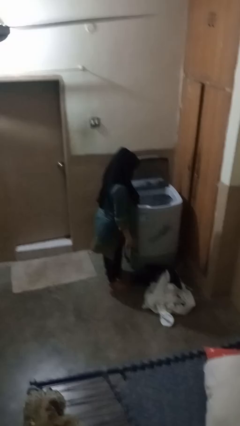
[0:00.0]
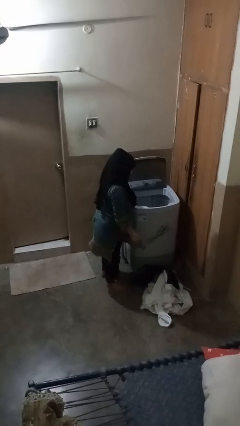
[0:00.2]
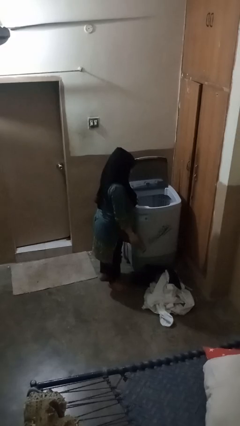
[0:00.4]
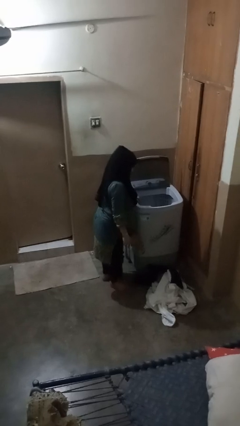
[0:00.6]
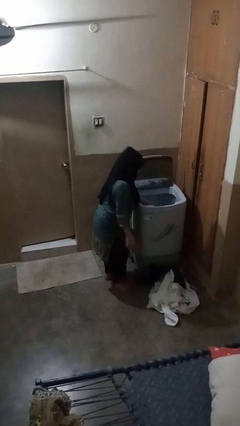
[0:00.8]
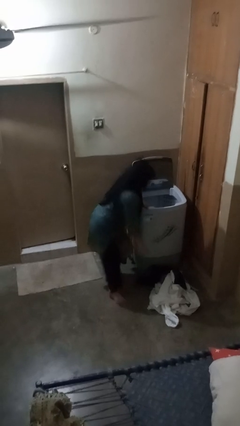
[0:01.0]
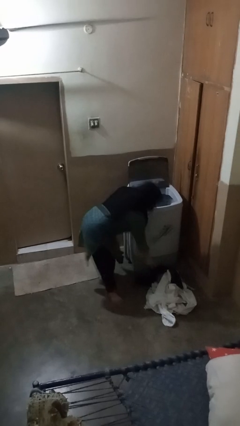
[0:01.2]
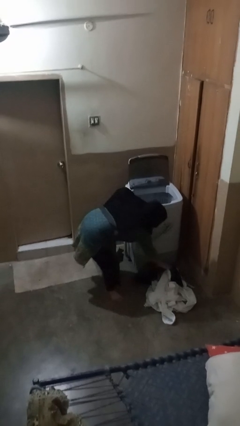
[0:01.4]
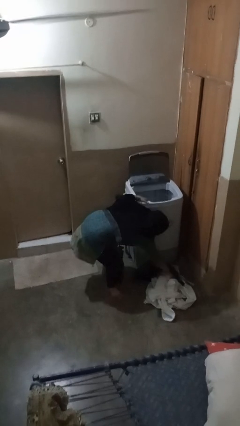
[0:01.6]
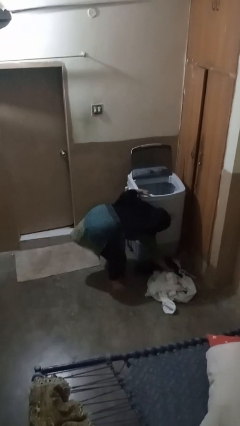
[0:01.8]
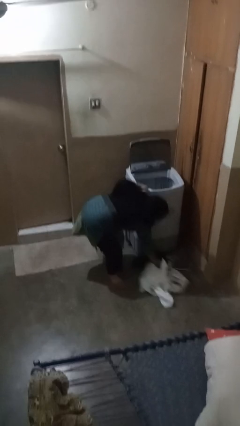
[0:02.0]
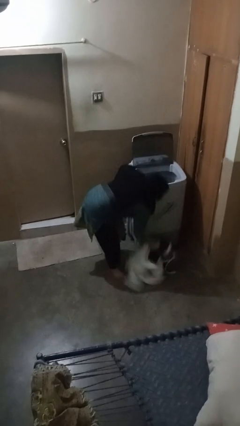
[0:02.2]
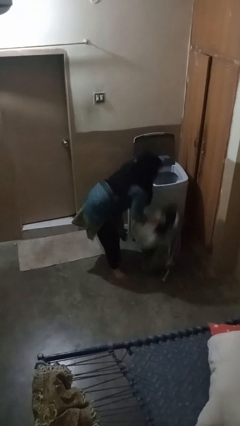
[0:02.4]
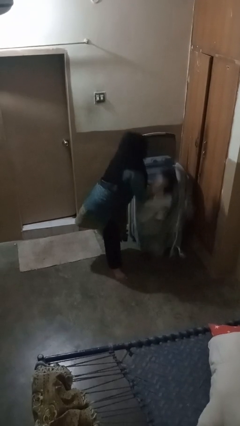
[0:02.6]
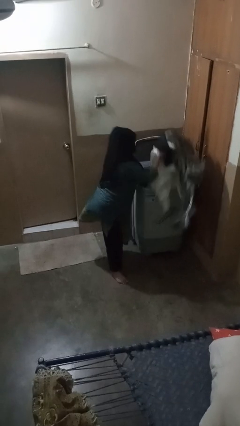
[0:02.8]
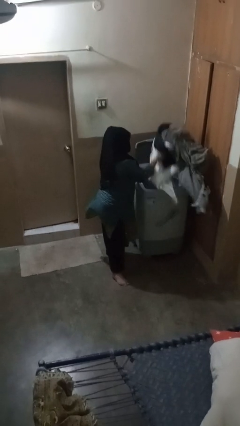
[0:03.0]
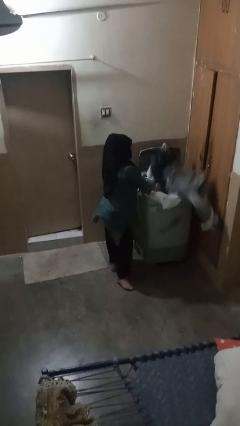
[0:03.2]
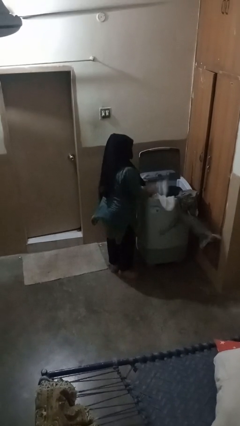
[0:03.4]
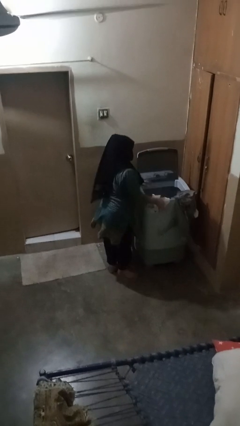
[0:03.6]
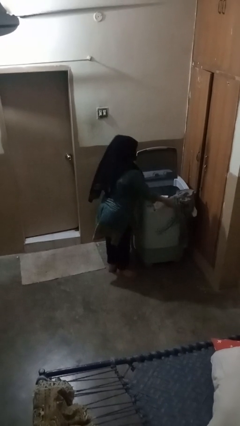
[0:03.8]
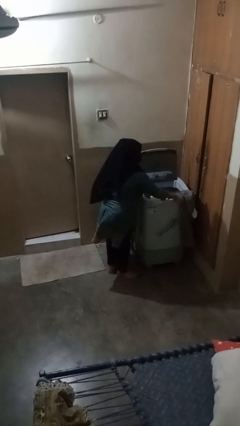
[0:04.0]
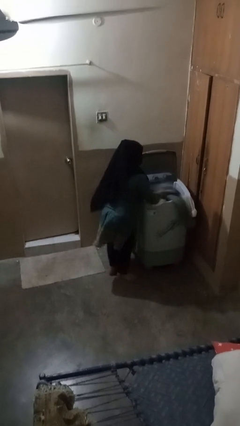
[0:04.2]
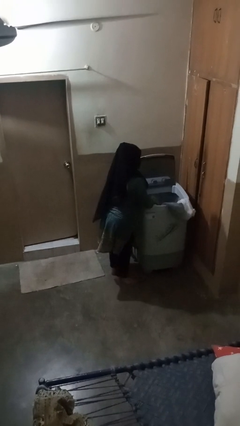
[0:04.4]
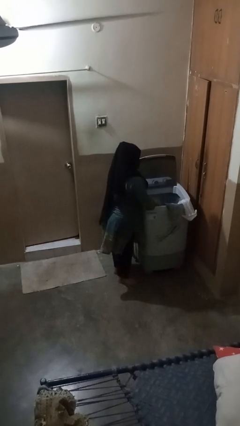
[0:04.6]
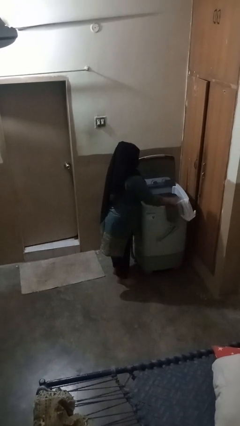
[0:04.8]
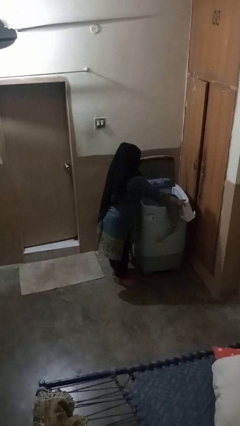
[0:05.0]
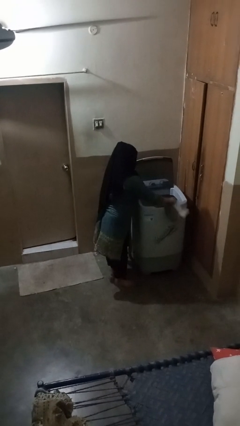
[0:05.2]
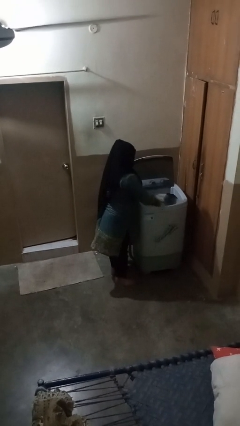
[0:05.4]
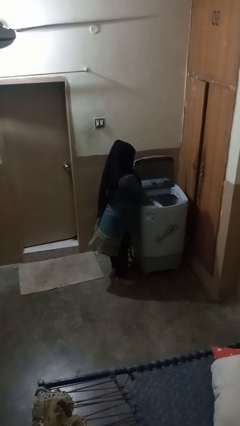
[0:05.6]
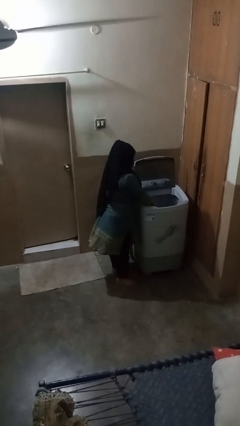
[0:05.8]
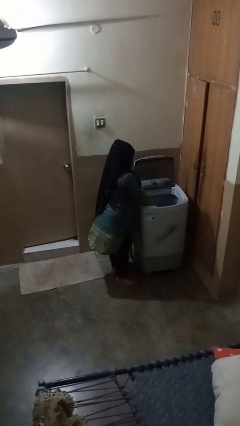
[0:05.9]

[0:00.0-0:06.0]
person loads clotheswasher

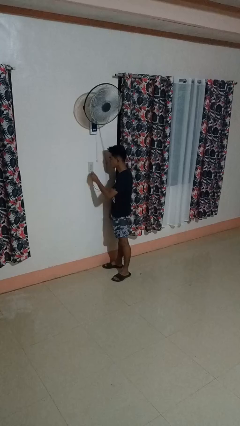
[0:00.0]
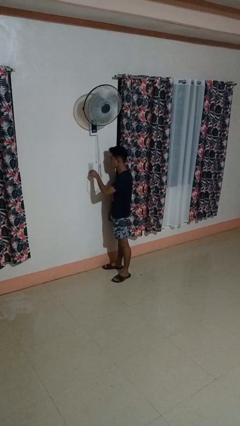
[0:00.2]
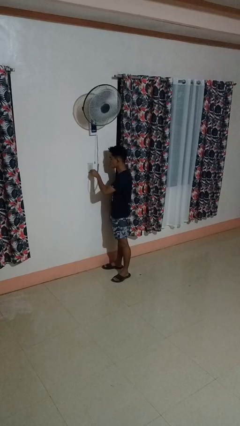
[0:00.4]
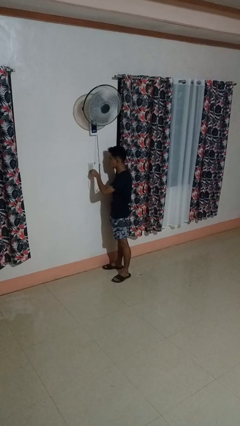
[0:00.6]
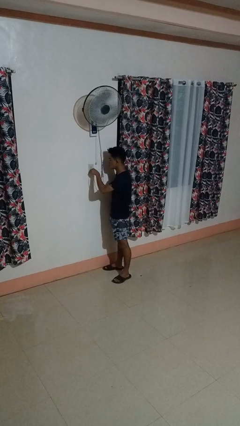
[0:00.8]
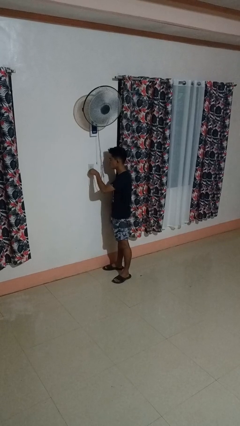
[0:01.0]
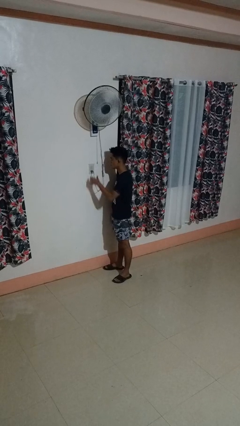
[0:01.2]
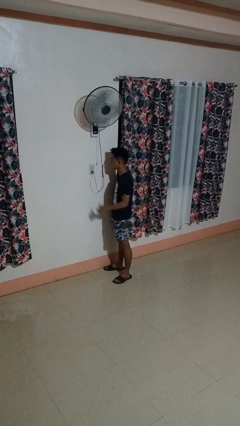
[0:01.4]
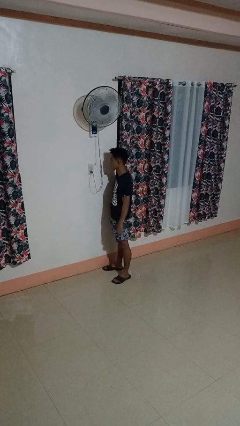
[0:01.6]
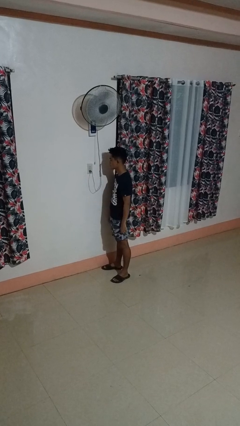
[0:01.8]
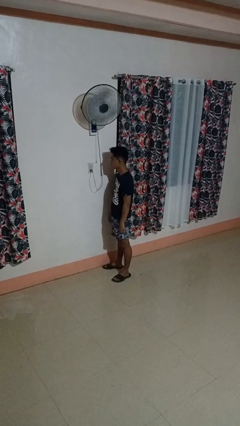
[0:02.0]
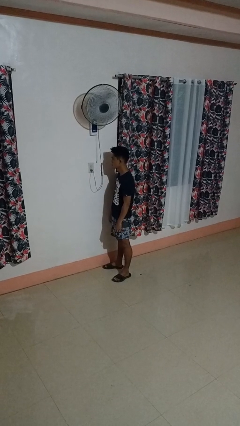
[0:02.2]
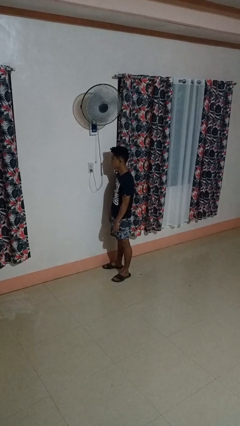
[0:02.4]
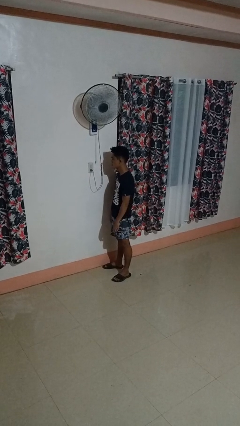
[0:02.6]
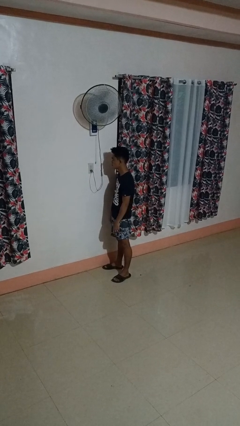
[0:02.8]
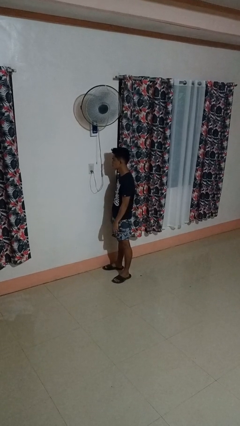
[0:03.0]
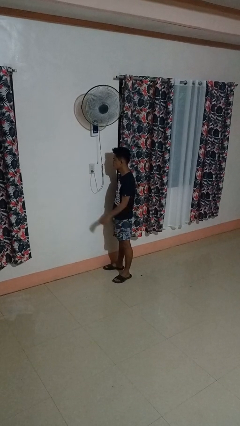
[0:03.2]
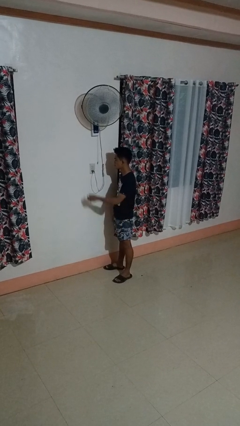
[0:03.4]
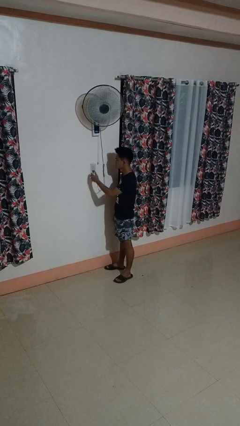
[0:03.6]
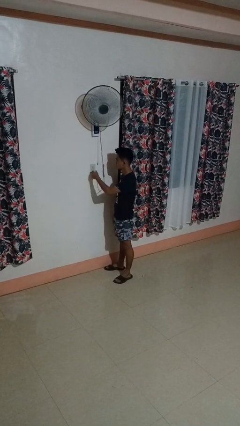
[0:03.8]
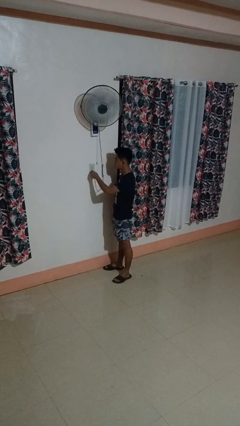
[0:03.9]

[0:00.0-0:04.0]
person plugs into electrical socket

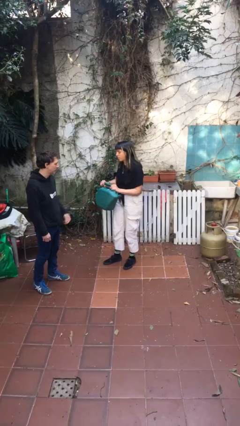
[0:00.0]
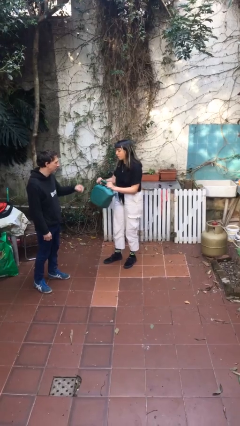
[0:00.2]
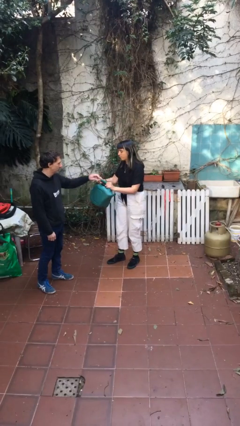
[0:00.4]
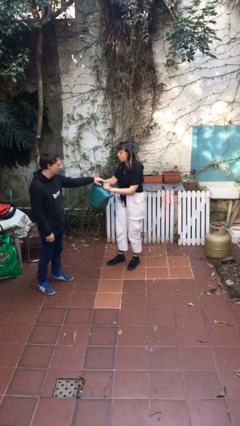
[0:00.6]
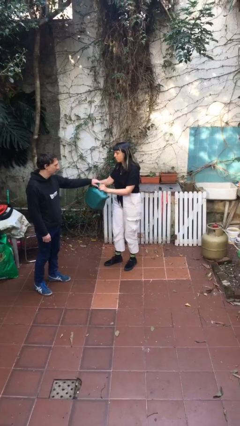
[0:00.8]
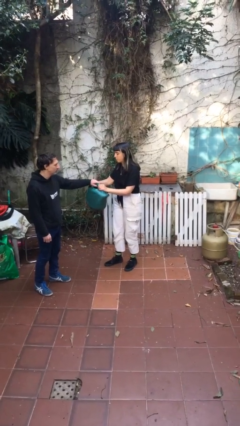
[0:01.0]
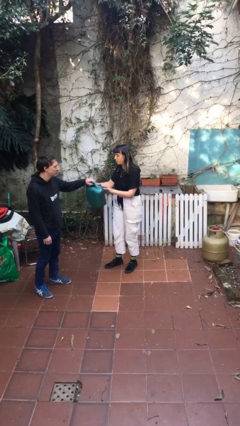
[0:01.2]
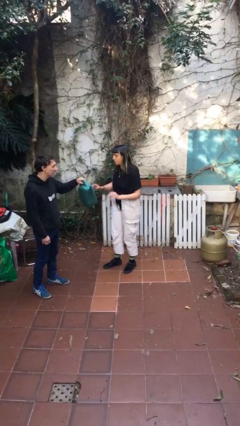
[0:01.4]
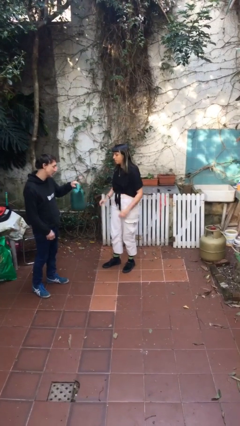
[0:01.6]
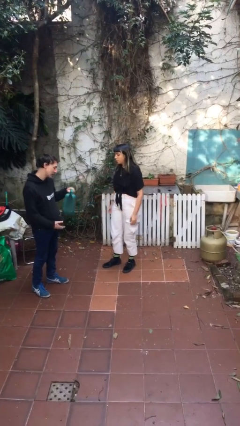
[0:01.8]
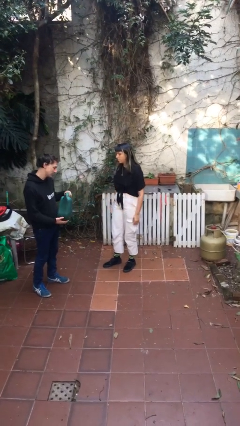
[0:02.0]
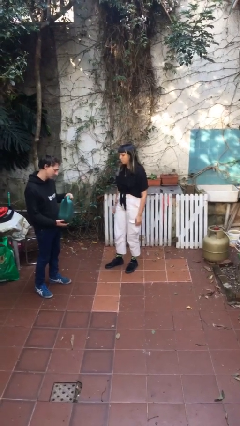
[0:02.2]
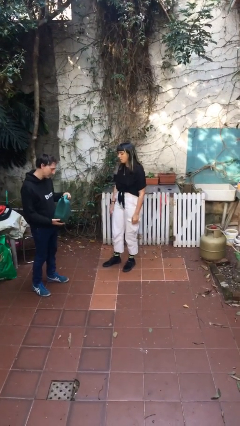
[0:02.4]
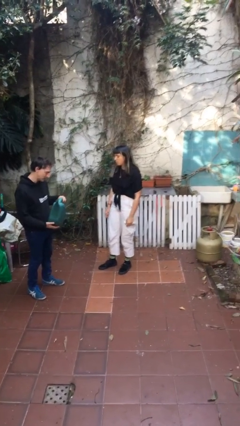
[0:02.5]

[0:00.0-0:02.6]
person transfers object to person

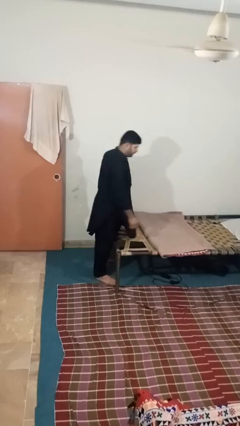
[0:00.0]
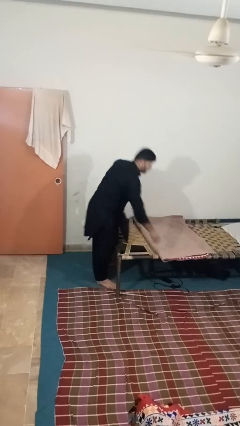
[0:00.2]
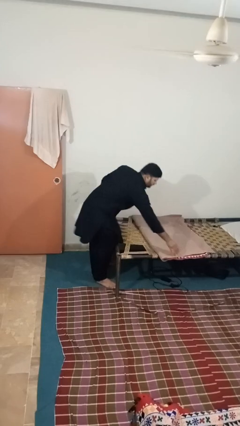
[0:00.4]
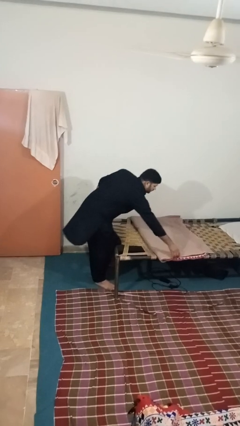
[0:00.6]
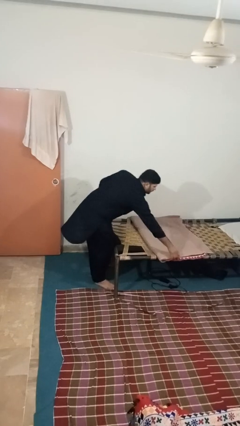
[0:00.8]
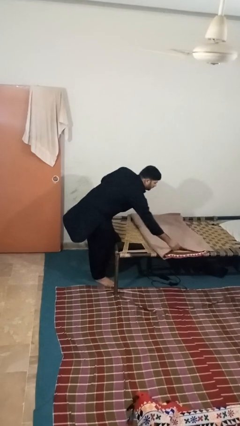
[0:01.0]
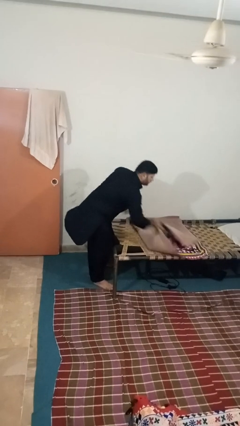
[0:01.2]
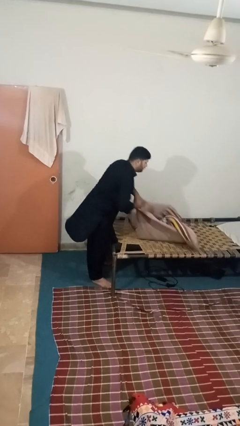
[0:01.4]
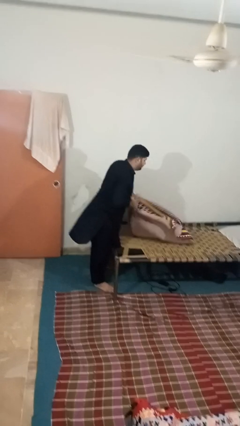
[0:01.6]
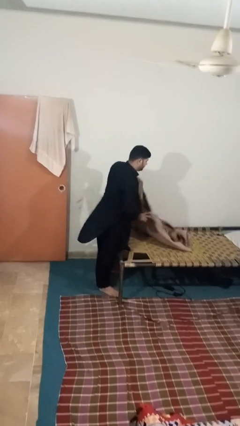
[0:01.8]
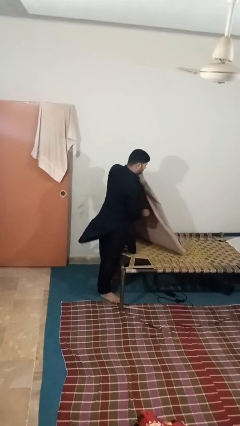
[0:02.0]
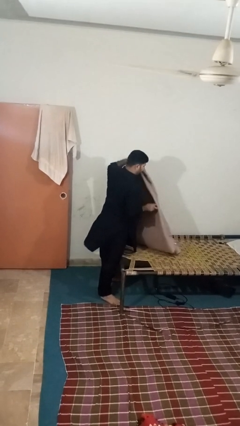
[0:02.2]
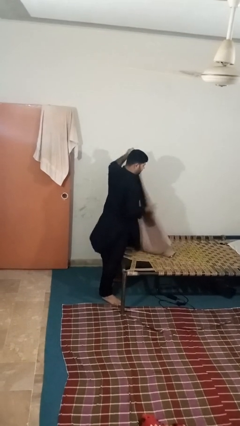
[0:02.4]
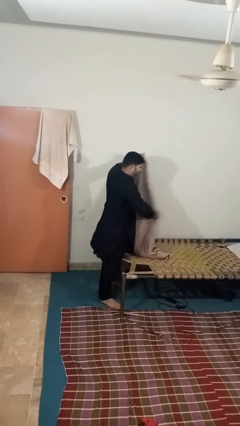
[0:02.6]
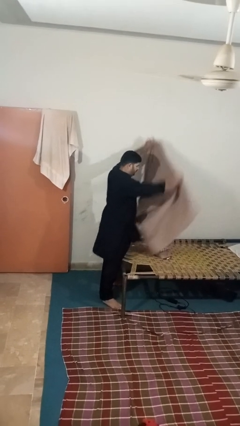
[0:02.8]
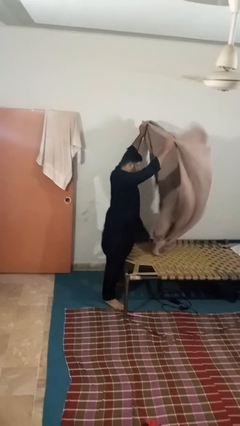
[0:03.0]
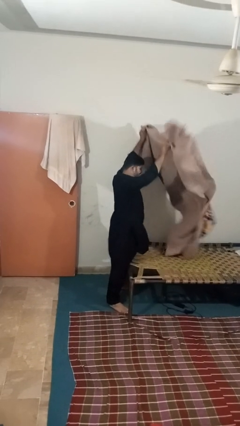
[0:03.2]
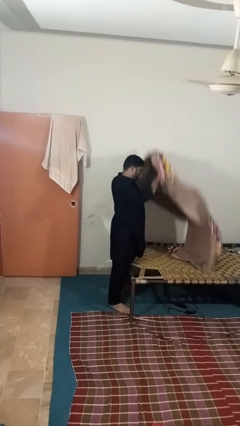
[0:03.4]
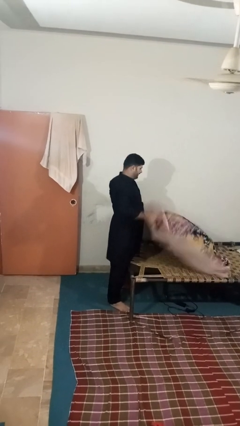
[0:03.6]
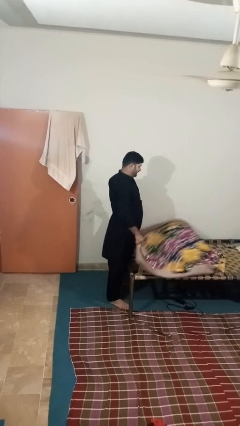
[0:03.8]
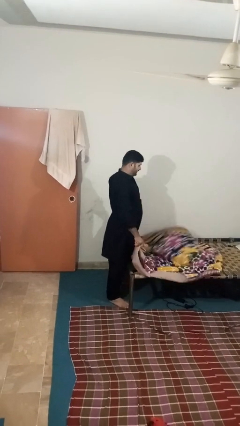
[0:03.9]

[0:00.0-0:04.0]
person unfolds blanket

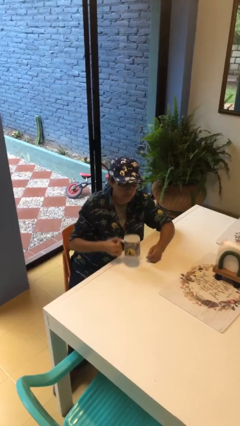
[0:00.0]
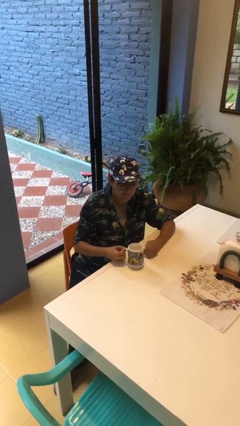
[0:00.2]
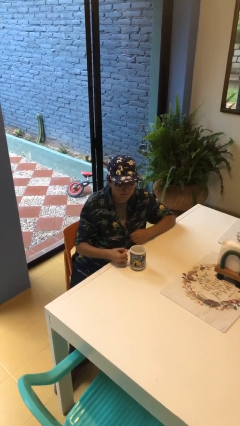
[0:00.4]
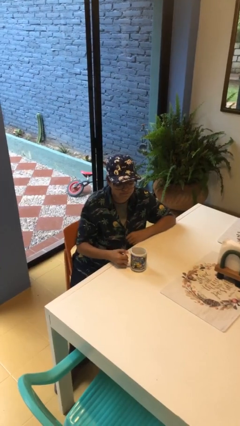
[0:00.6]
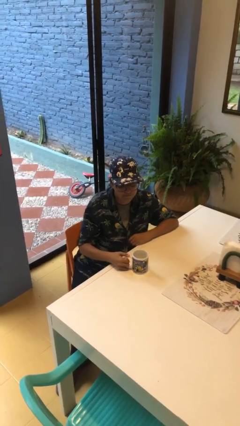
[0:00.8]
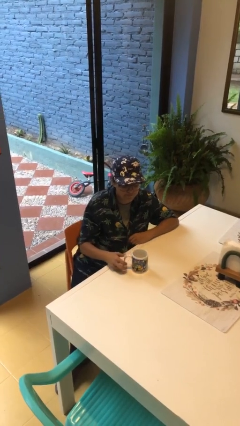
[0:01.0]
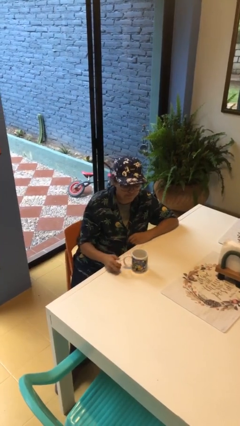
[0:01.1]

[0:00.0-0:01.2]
person puts down object on table
